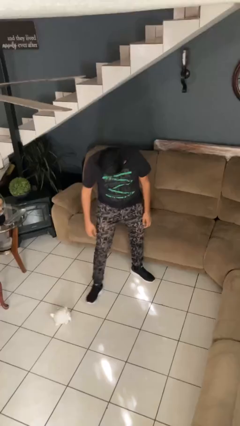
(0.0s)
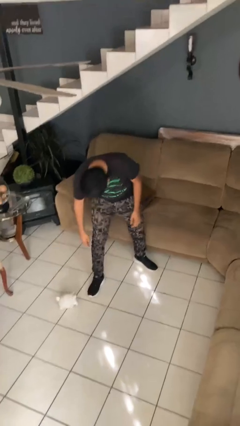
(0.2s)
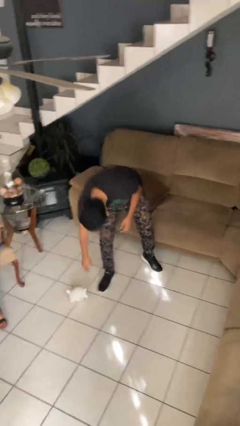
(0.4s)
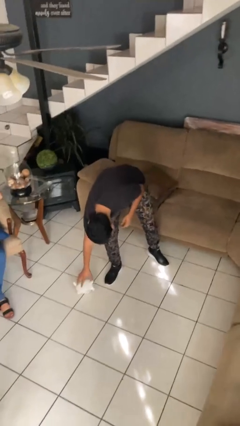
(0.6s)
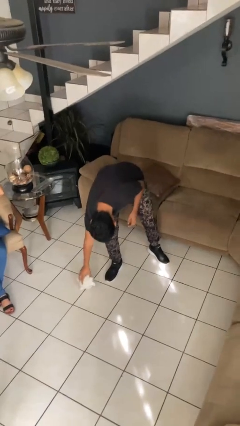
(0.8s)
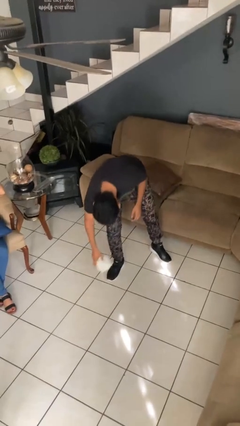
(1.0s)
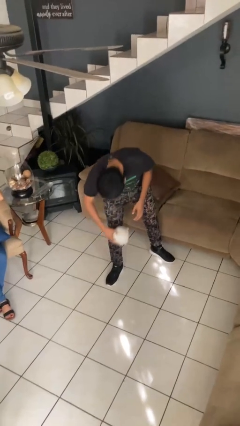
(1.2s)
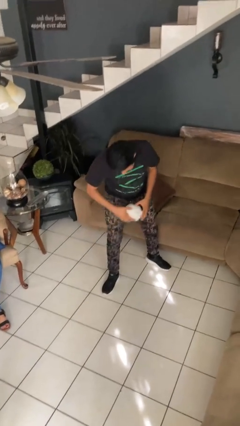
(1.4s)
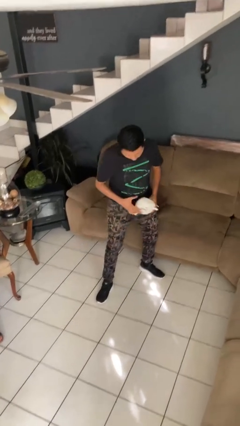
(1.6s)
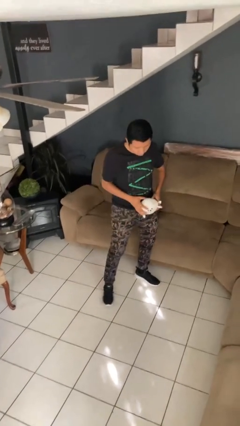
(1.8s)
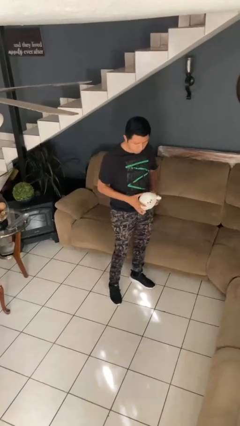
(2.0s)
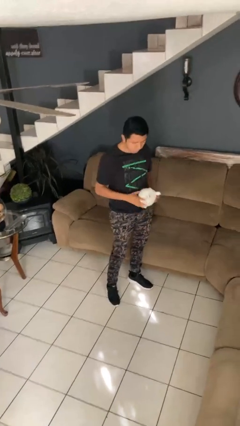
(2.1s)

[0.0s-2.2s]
person picks up object from floor

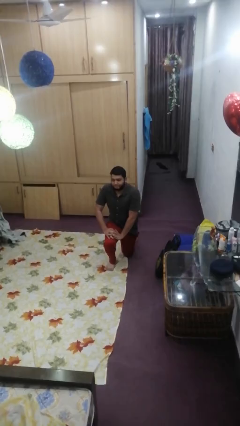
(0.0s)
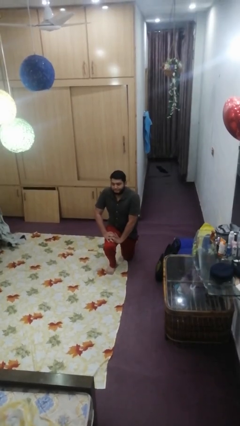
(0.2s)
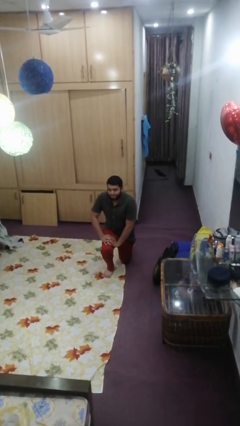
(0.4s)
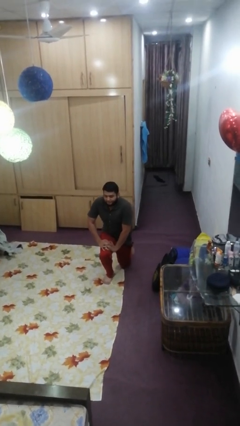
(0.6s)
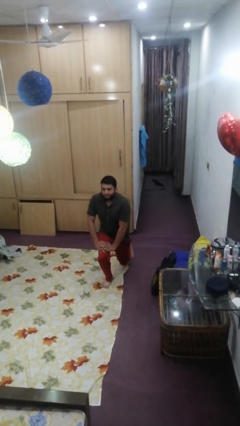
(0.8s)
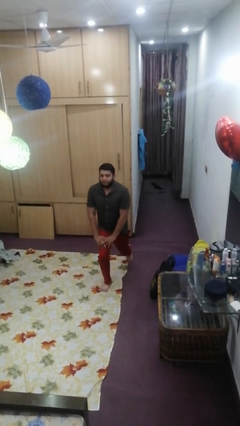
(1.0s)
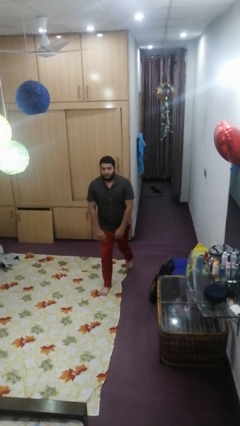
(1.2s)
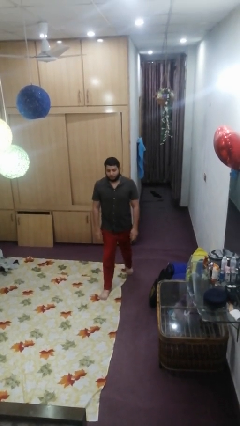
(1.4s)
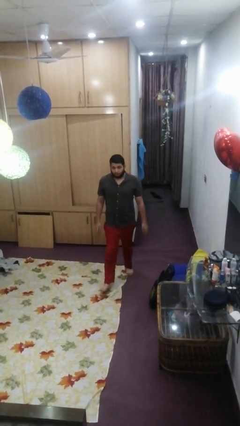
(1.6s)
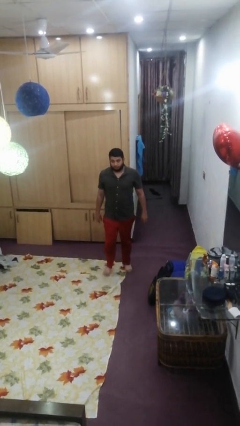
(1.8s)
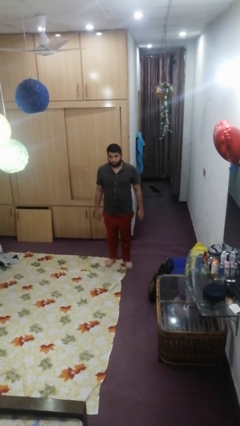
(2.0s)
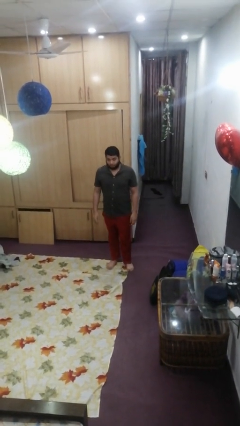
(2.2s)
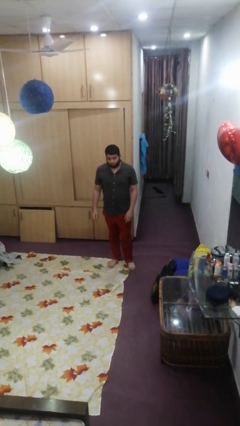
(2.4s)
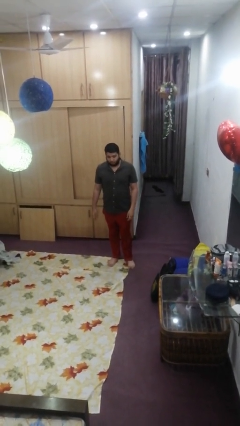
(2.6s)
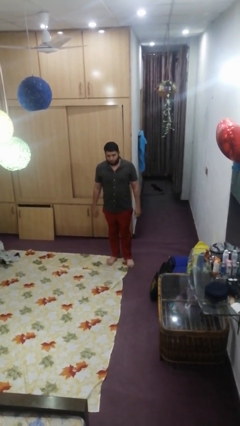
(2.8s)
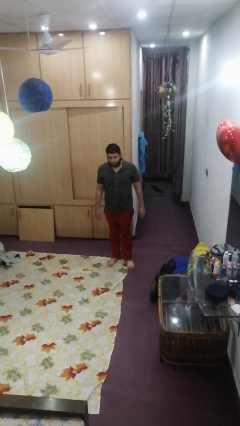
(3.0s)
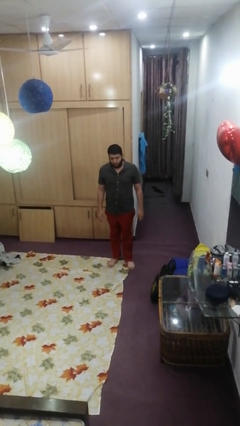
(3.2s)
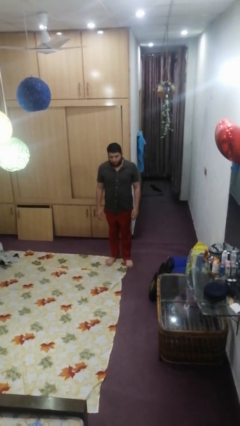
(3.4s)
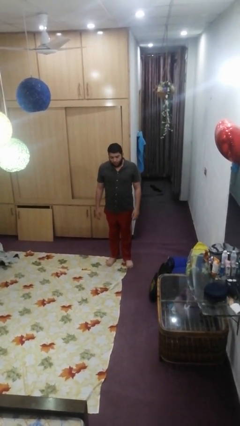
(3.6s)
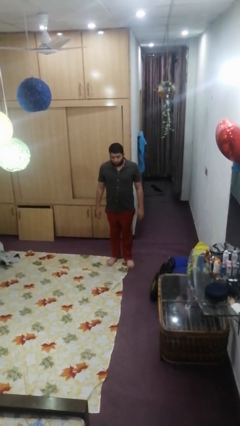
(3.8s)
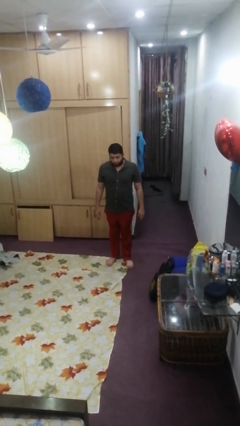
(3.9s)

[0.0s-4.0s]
person stands up from floor

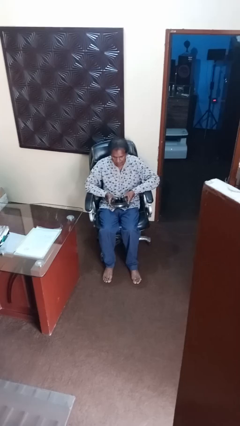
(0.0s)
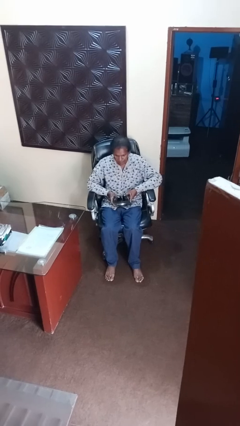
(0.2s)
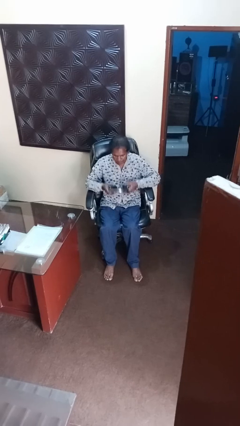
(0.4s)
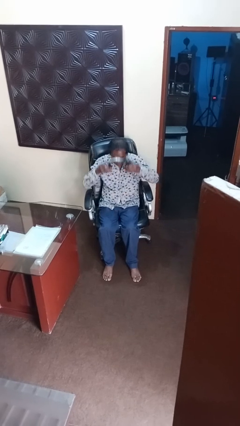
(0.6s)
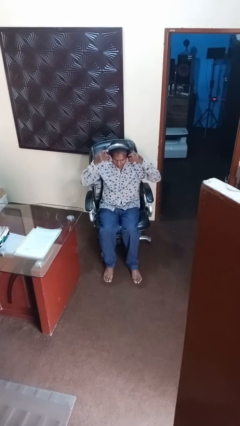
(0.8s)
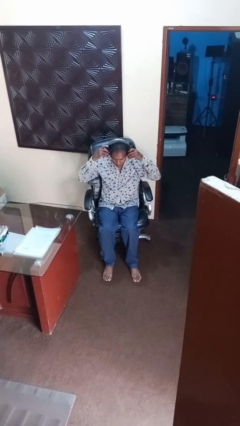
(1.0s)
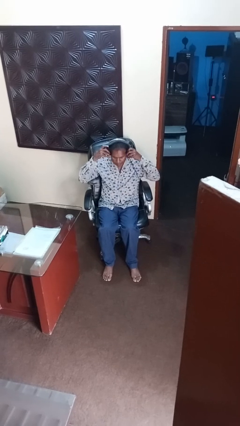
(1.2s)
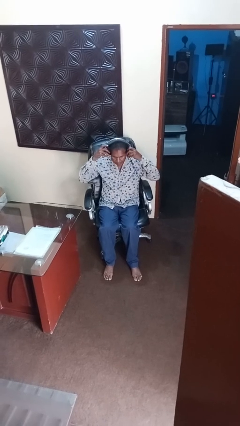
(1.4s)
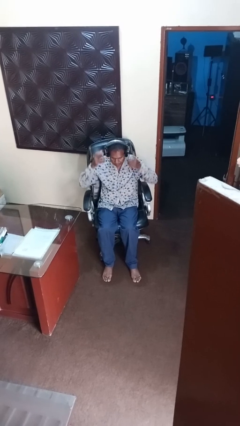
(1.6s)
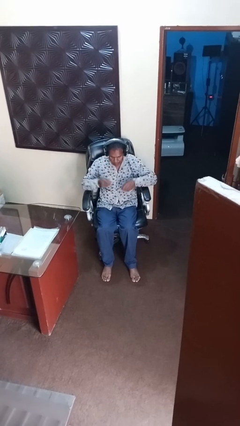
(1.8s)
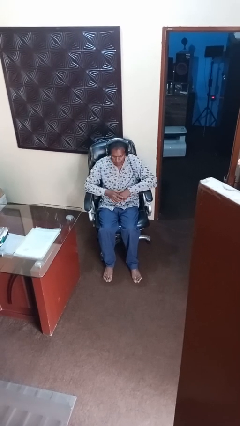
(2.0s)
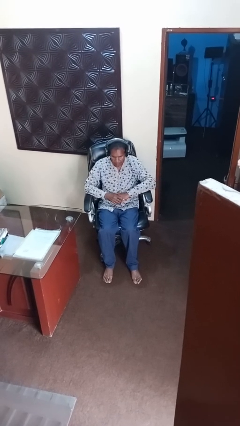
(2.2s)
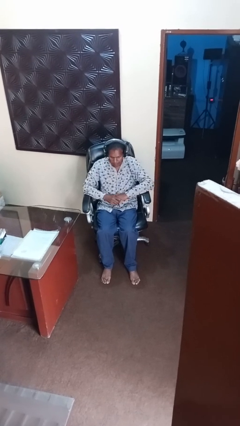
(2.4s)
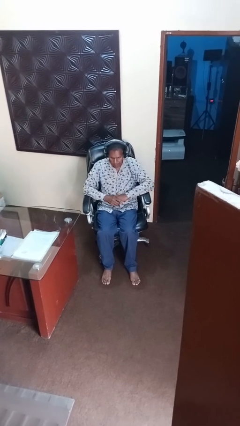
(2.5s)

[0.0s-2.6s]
person puts on headphones

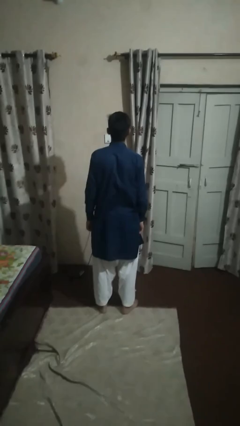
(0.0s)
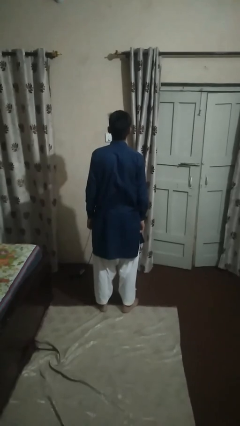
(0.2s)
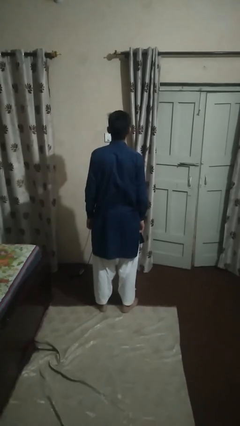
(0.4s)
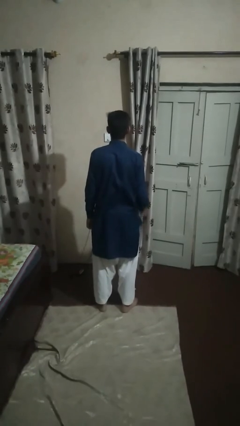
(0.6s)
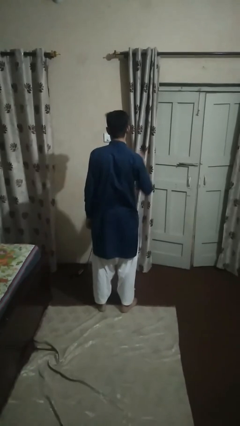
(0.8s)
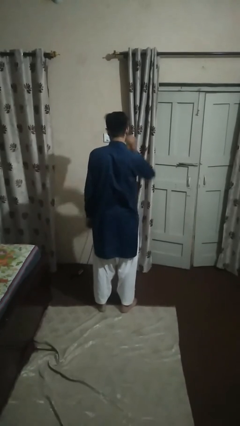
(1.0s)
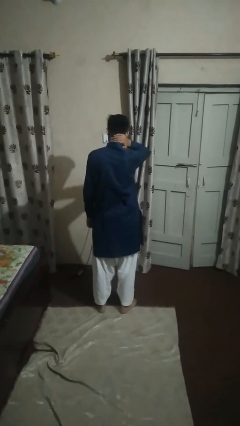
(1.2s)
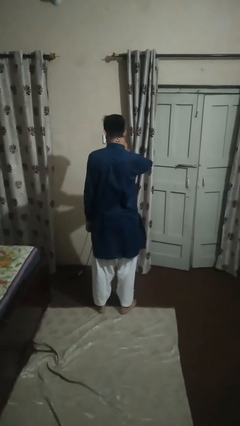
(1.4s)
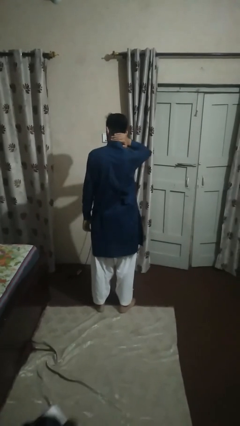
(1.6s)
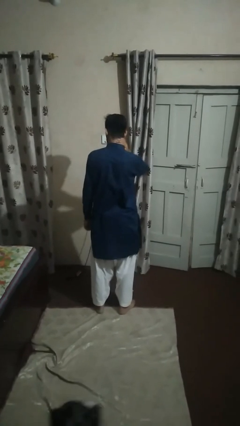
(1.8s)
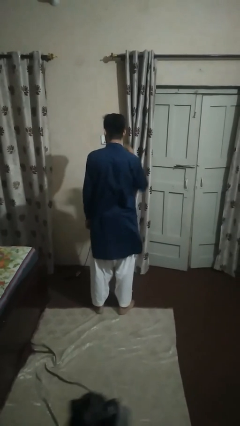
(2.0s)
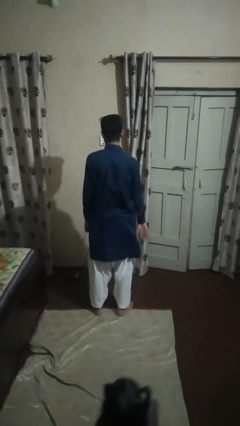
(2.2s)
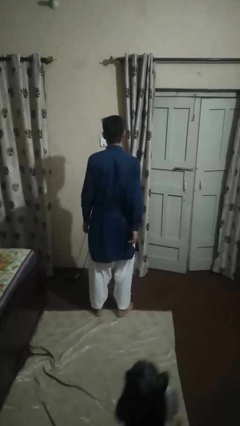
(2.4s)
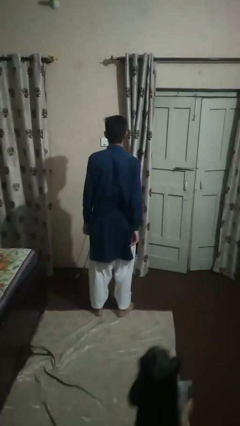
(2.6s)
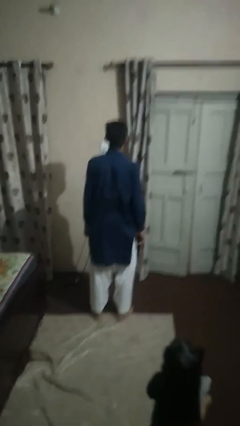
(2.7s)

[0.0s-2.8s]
person rubs neck

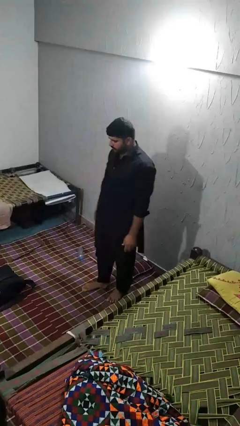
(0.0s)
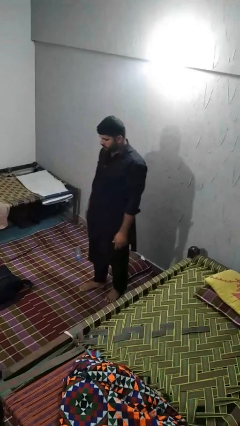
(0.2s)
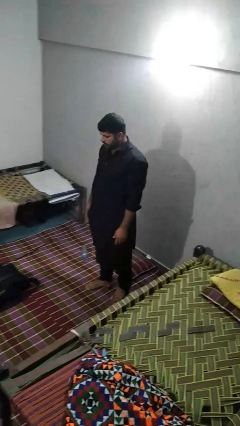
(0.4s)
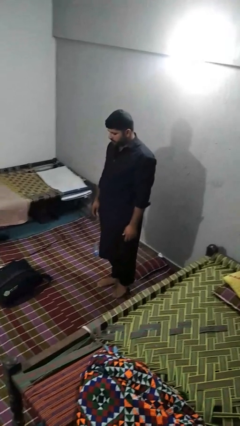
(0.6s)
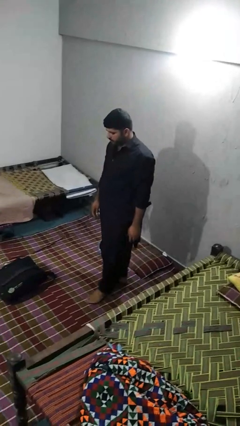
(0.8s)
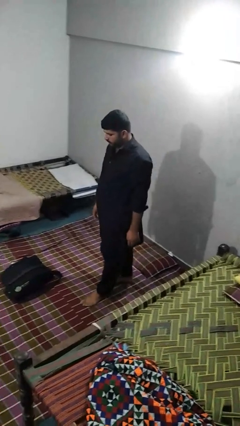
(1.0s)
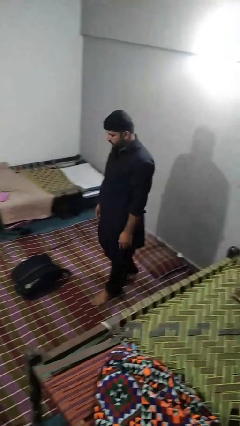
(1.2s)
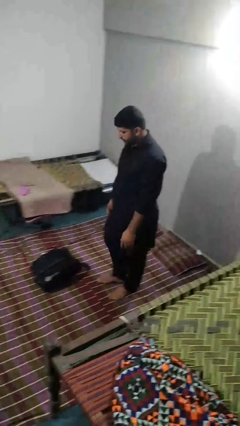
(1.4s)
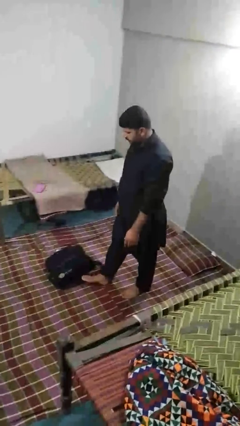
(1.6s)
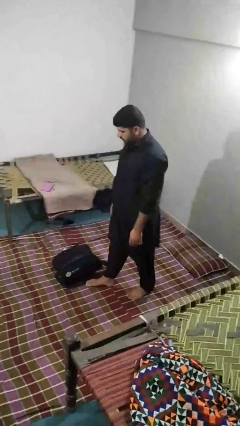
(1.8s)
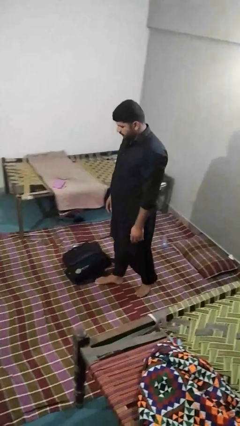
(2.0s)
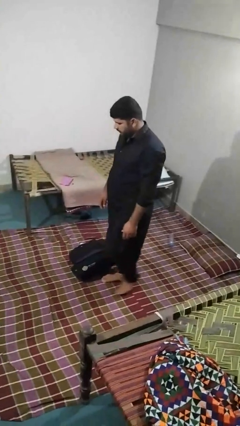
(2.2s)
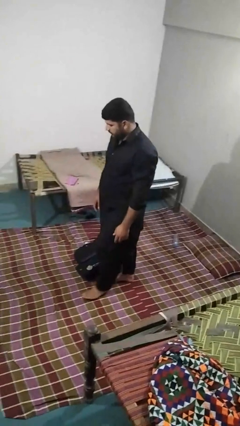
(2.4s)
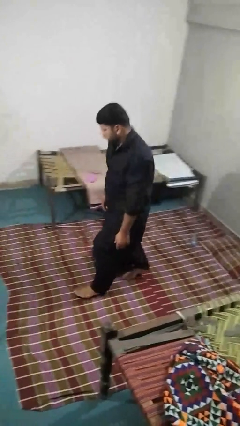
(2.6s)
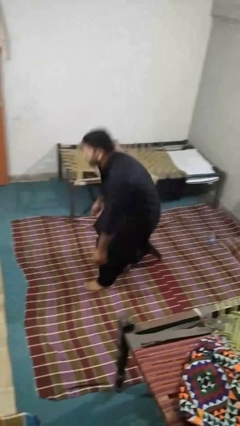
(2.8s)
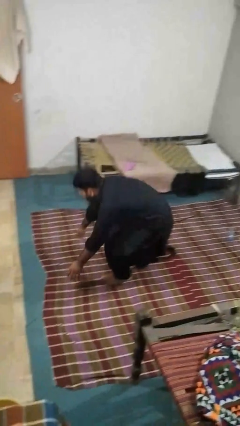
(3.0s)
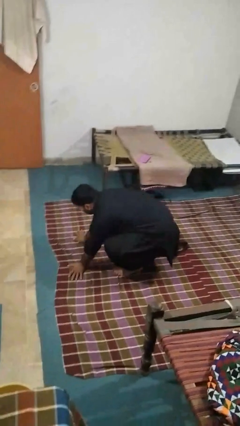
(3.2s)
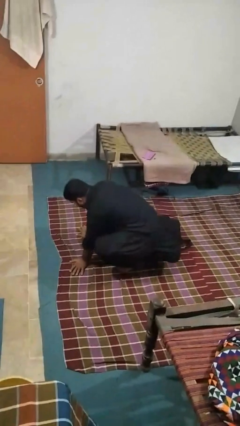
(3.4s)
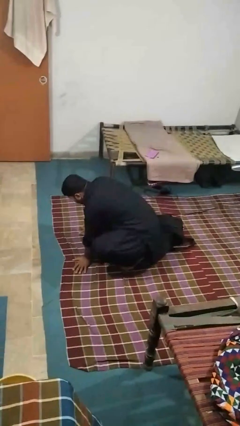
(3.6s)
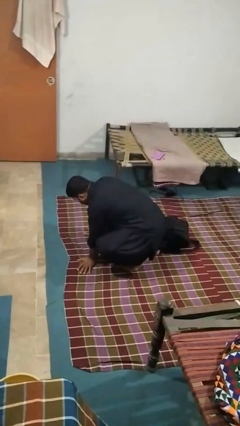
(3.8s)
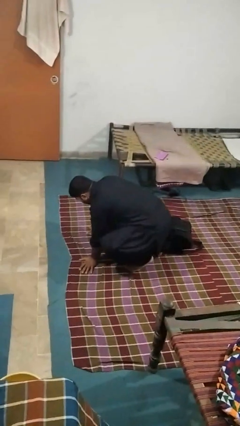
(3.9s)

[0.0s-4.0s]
person trips on object on floor

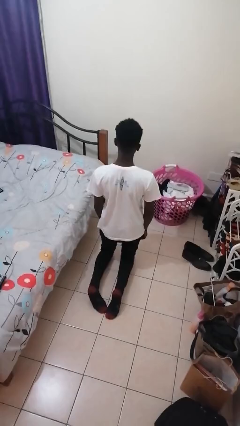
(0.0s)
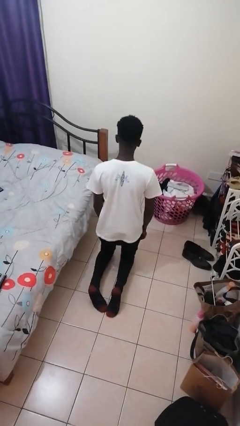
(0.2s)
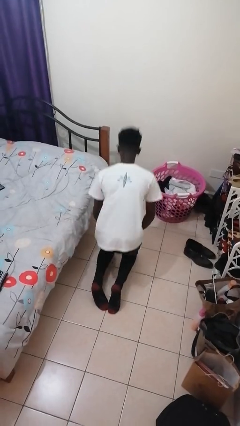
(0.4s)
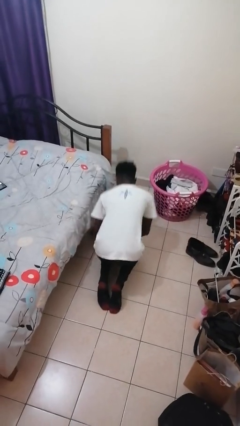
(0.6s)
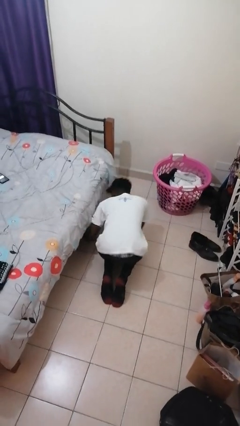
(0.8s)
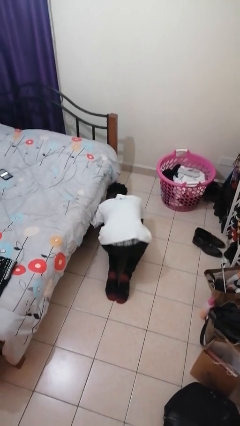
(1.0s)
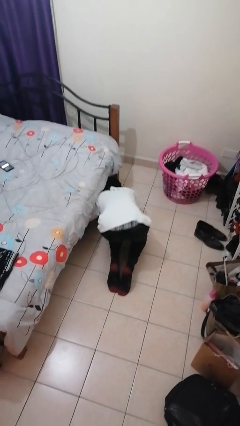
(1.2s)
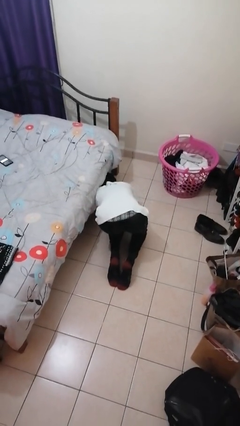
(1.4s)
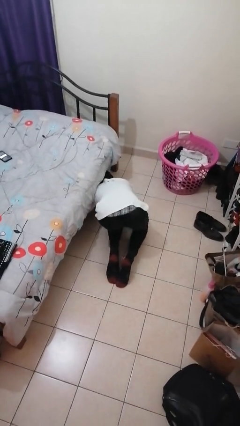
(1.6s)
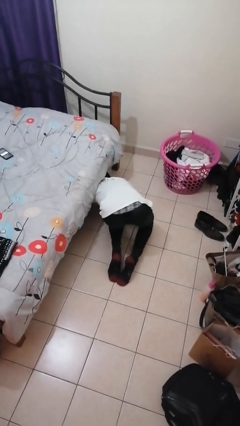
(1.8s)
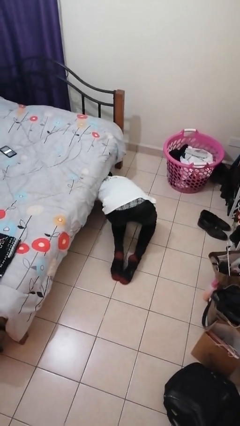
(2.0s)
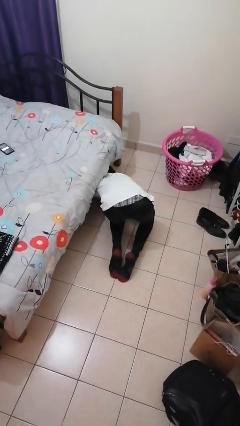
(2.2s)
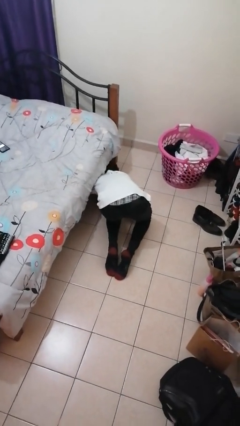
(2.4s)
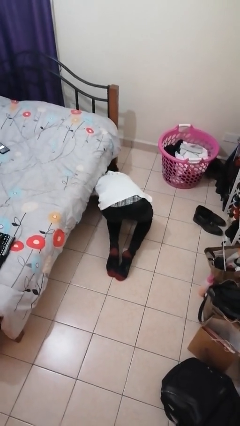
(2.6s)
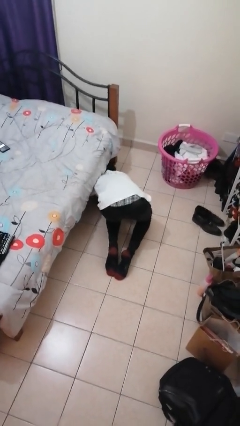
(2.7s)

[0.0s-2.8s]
person searches under bed
